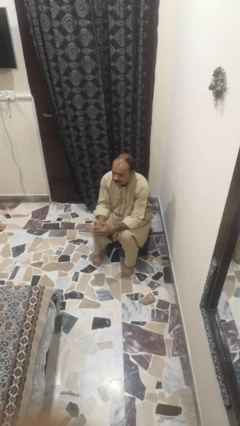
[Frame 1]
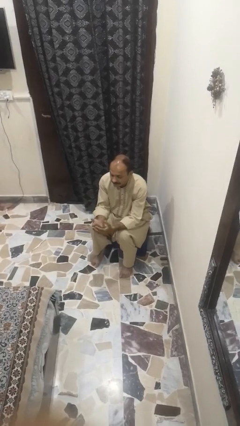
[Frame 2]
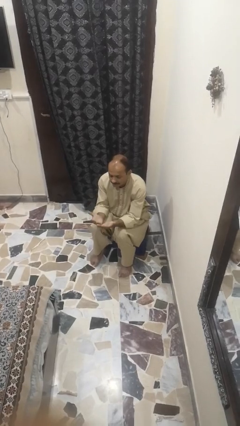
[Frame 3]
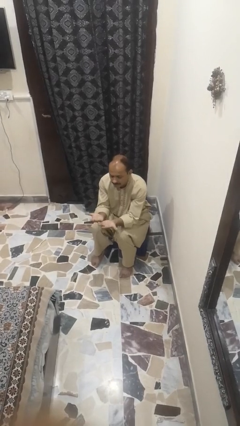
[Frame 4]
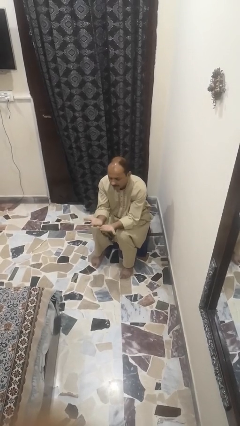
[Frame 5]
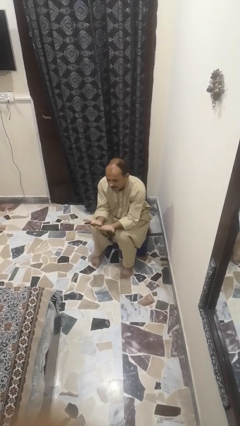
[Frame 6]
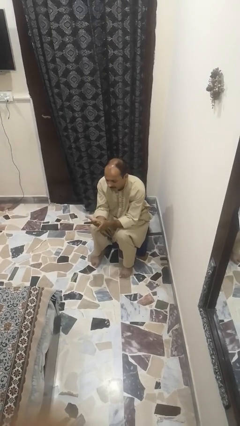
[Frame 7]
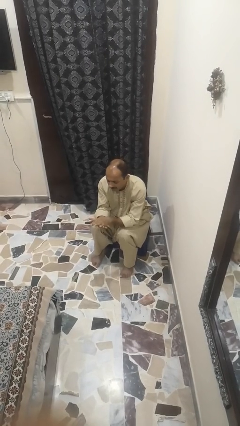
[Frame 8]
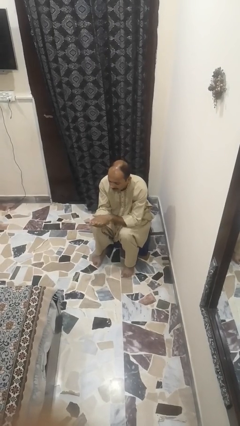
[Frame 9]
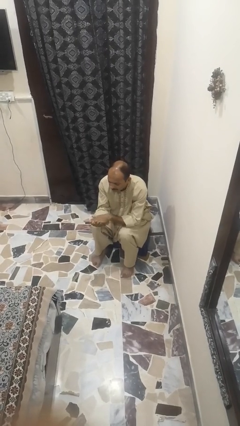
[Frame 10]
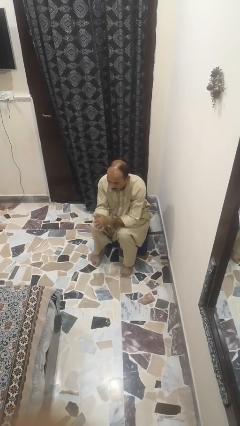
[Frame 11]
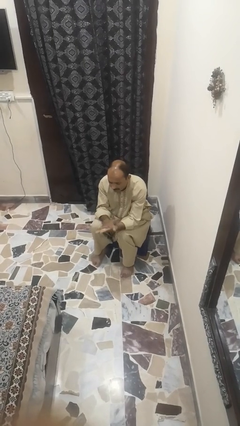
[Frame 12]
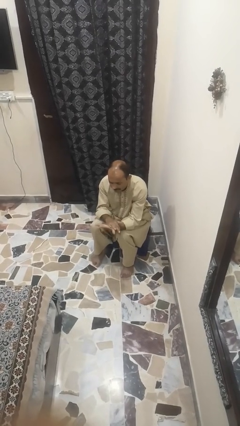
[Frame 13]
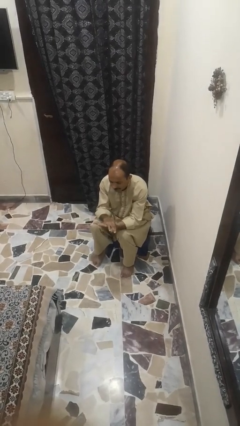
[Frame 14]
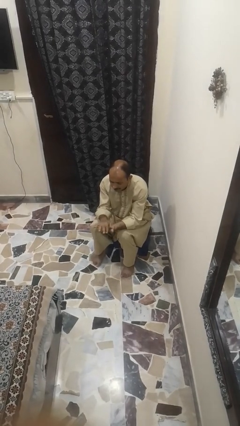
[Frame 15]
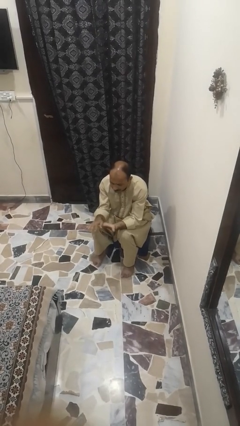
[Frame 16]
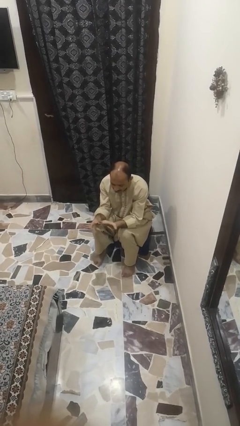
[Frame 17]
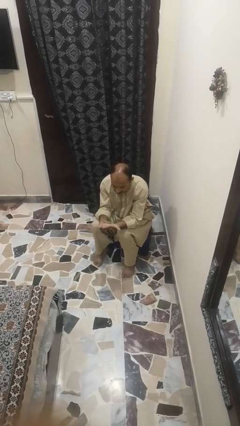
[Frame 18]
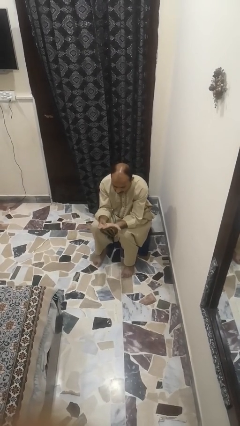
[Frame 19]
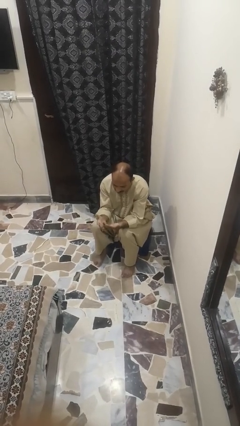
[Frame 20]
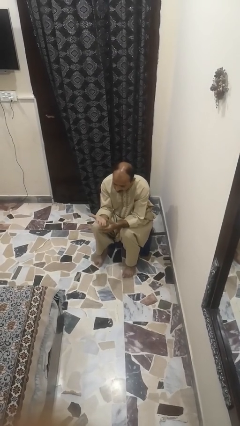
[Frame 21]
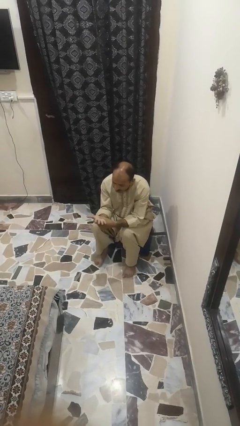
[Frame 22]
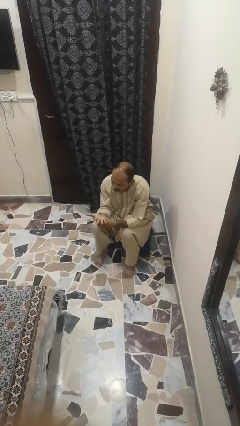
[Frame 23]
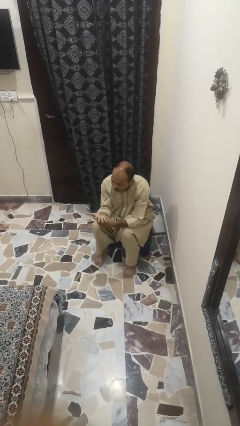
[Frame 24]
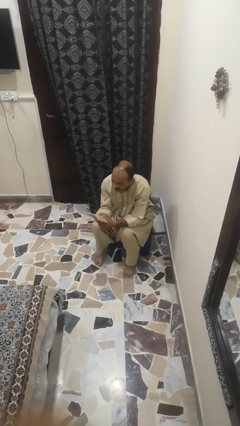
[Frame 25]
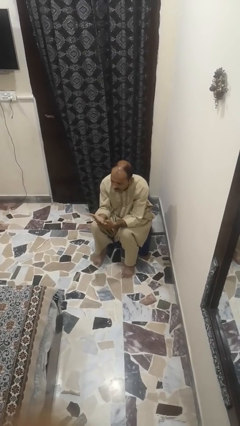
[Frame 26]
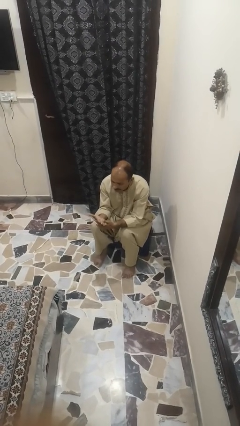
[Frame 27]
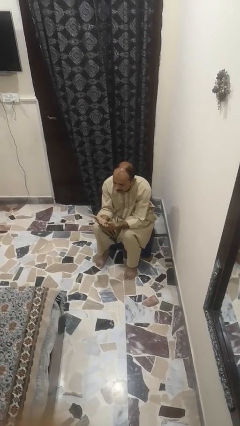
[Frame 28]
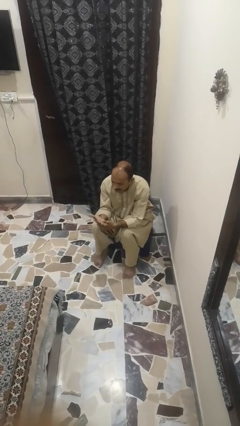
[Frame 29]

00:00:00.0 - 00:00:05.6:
person looks at hands in lap

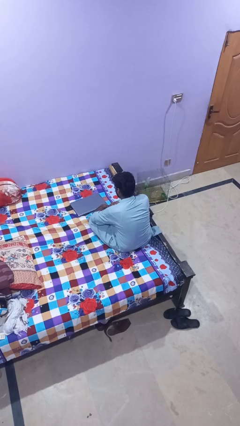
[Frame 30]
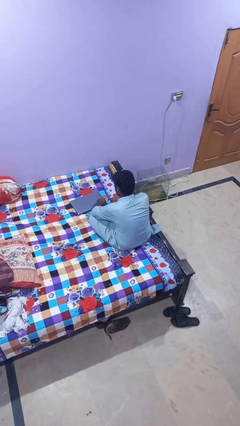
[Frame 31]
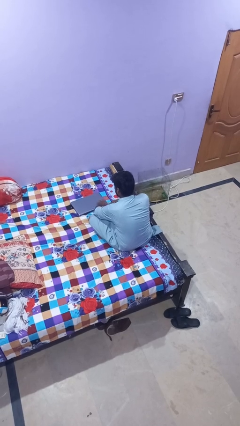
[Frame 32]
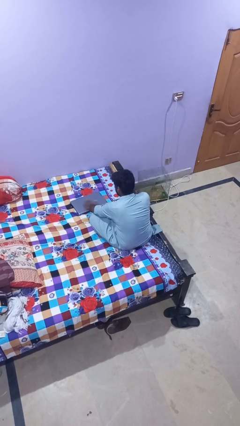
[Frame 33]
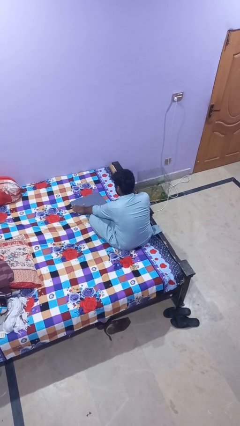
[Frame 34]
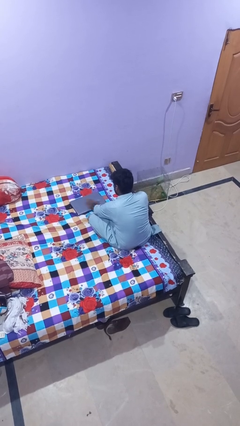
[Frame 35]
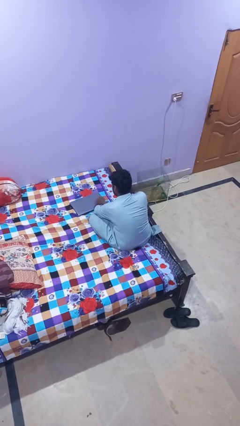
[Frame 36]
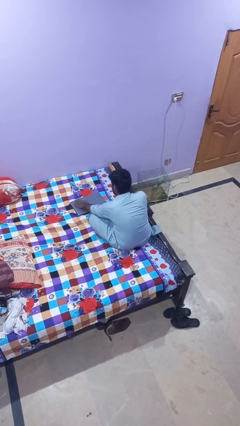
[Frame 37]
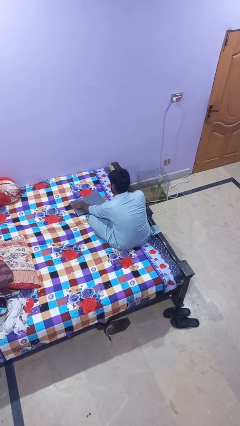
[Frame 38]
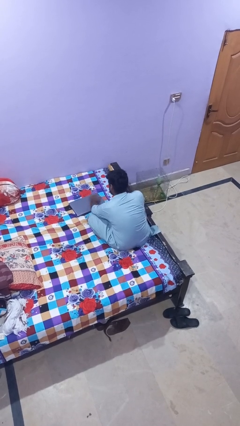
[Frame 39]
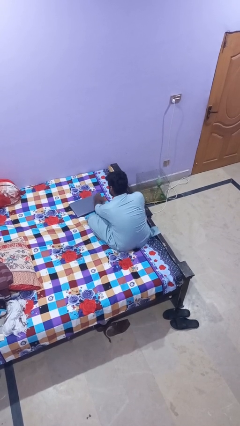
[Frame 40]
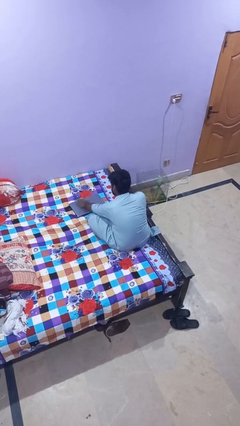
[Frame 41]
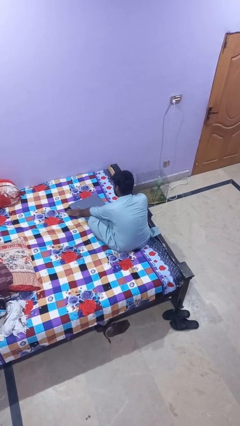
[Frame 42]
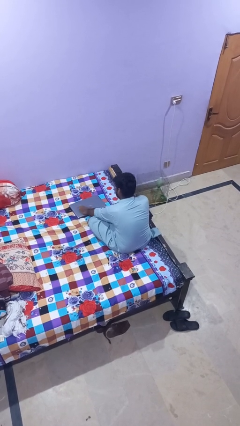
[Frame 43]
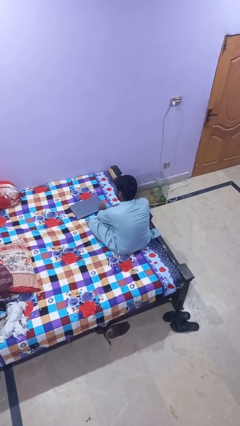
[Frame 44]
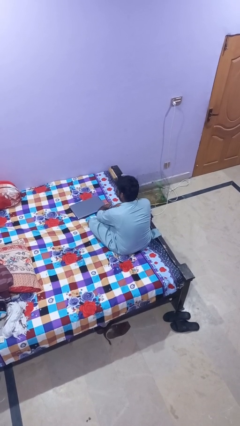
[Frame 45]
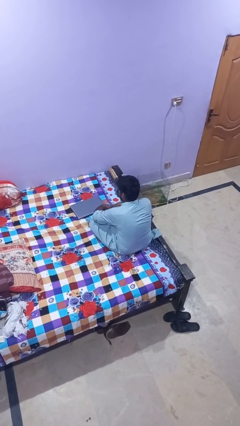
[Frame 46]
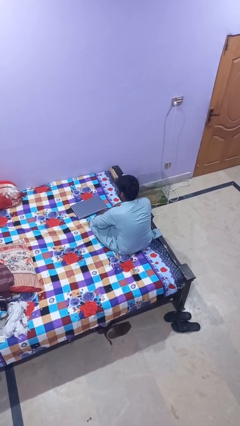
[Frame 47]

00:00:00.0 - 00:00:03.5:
person waves hand over object

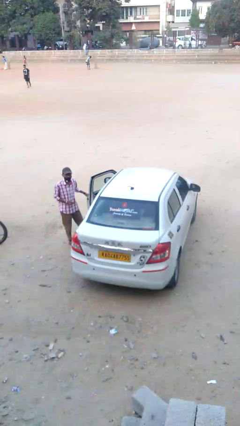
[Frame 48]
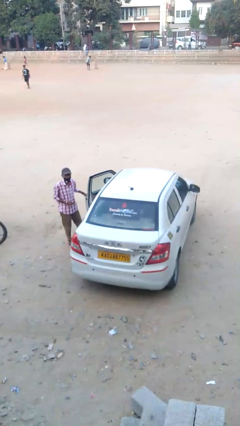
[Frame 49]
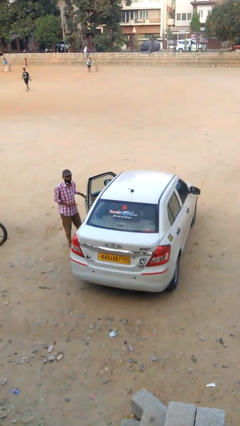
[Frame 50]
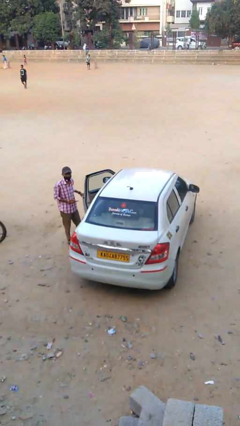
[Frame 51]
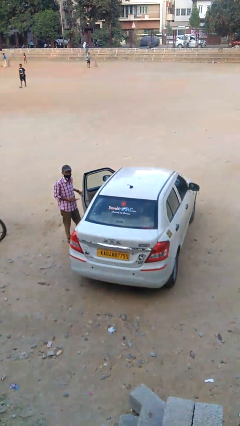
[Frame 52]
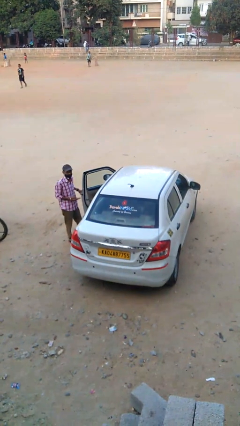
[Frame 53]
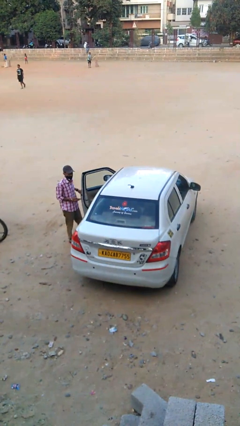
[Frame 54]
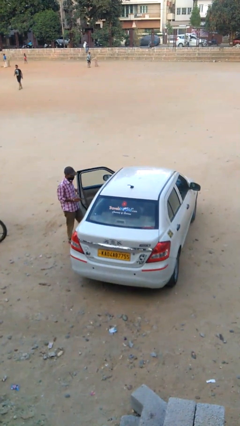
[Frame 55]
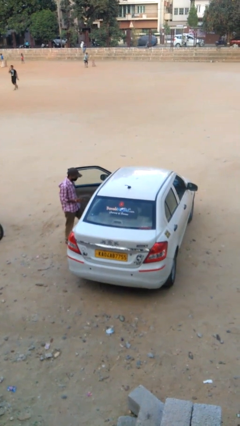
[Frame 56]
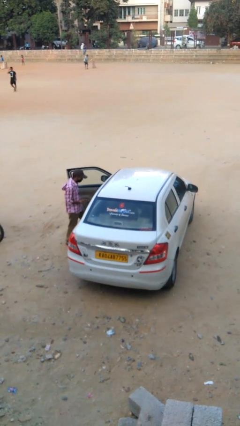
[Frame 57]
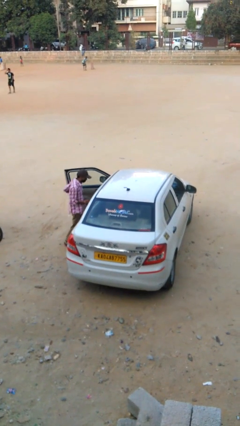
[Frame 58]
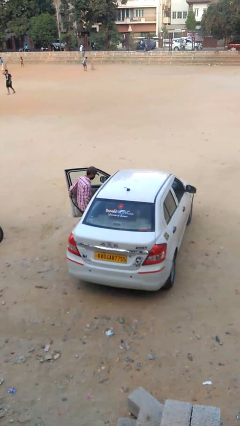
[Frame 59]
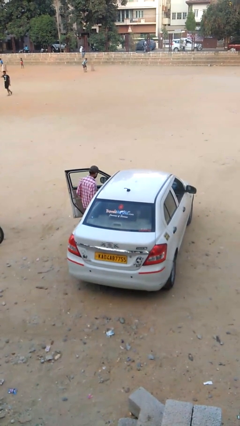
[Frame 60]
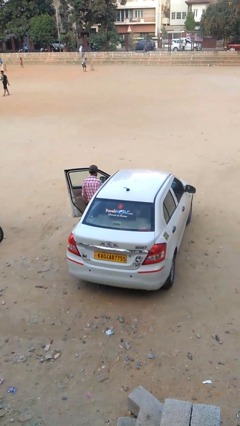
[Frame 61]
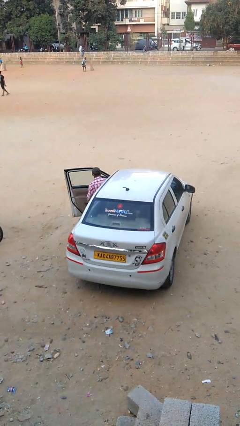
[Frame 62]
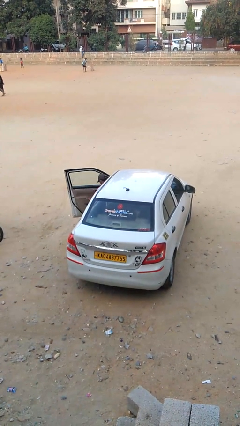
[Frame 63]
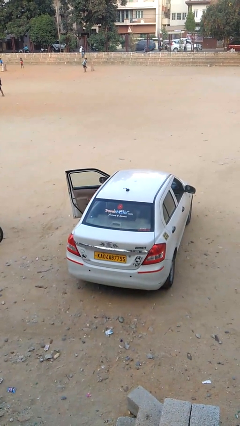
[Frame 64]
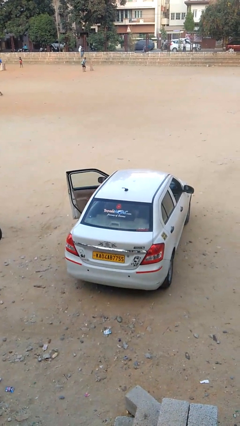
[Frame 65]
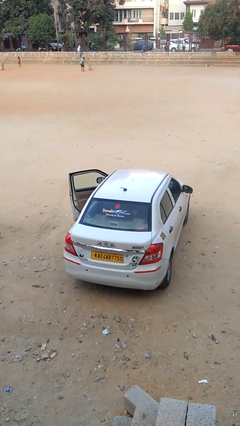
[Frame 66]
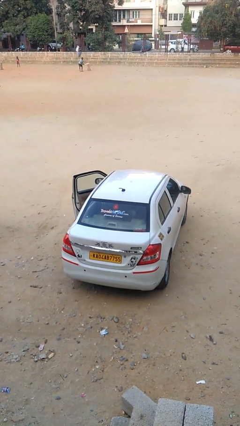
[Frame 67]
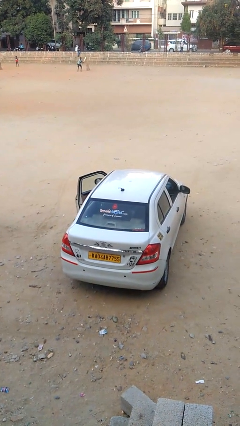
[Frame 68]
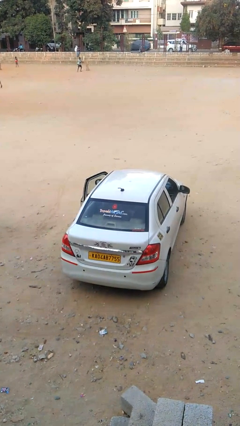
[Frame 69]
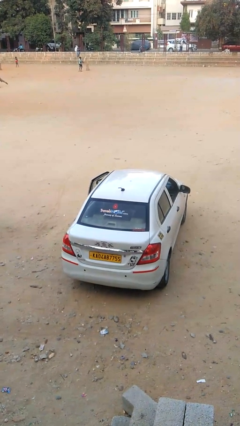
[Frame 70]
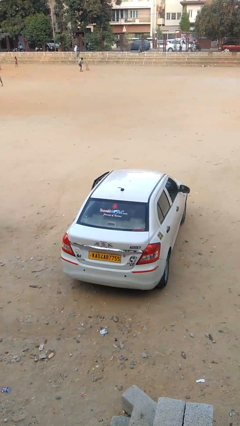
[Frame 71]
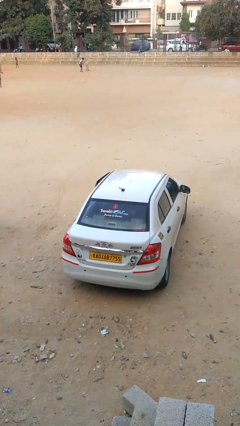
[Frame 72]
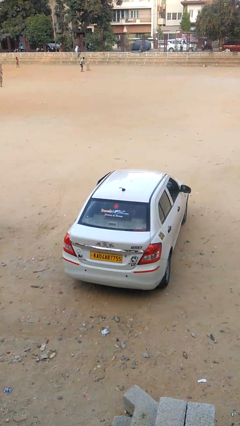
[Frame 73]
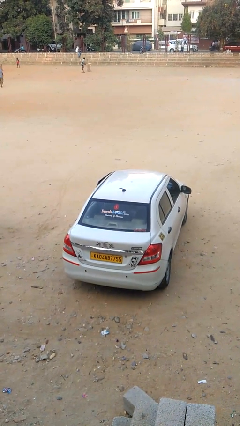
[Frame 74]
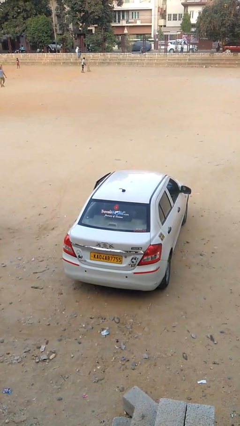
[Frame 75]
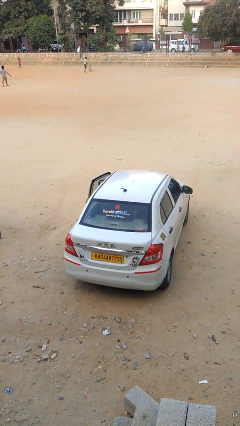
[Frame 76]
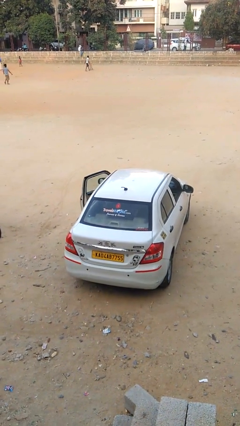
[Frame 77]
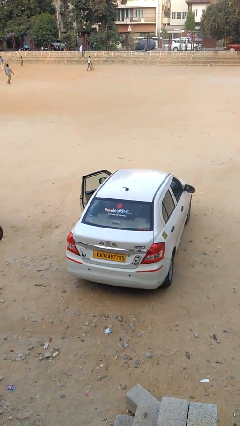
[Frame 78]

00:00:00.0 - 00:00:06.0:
car picks up person

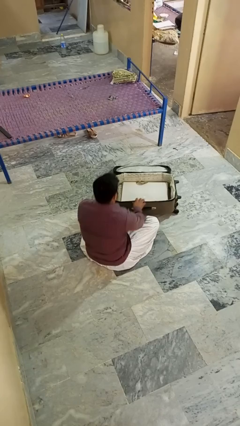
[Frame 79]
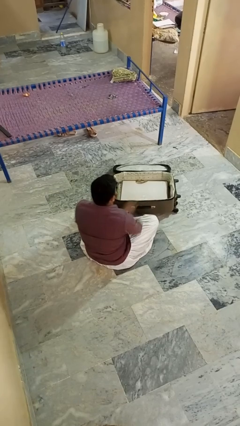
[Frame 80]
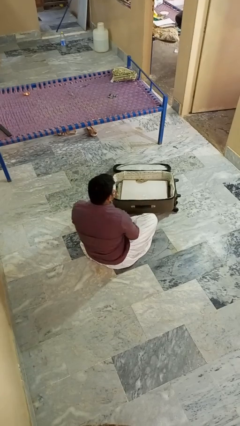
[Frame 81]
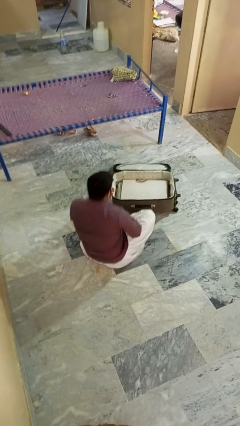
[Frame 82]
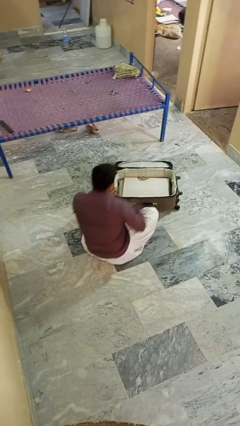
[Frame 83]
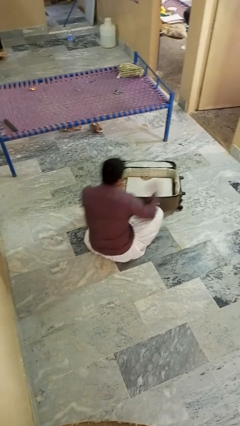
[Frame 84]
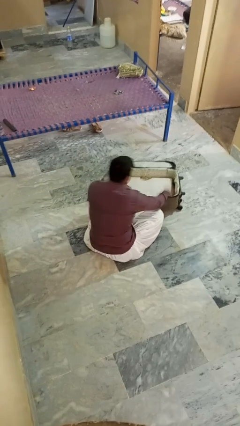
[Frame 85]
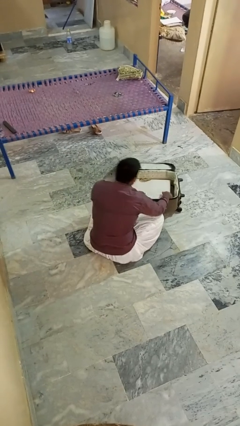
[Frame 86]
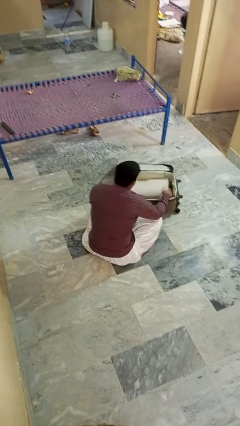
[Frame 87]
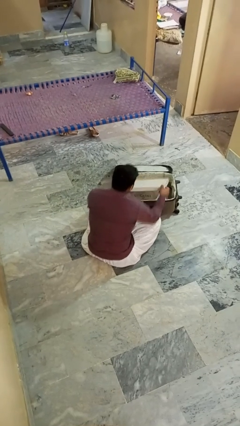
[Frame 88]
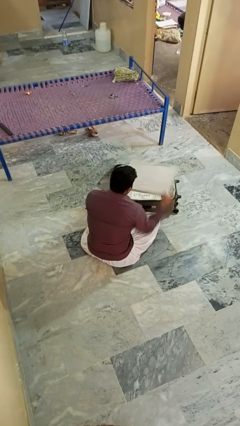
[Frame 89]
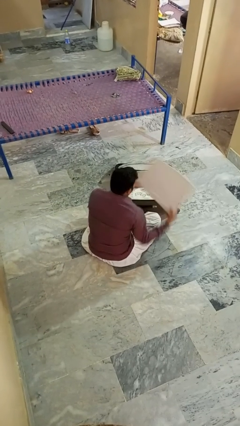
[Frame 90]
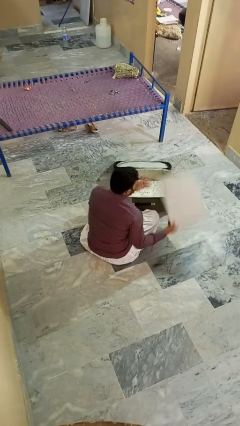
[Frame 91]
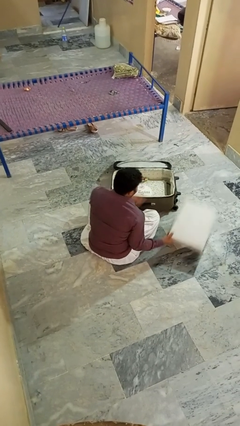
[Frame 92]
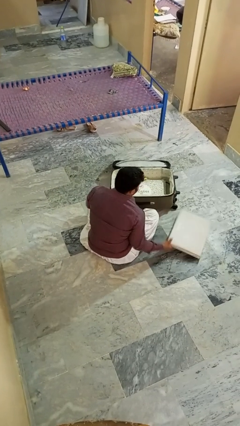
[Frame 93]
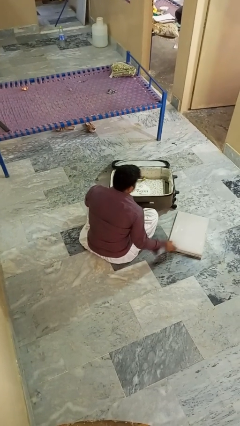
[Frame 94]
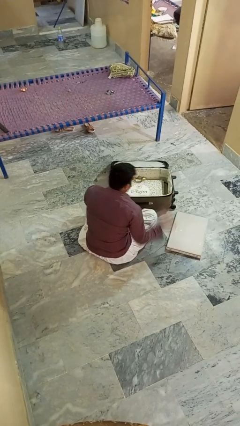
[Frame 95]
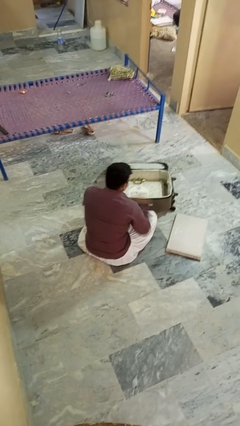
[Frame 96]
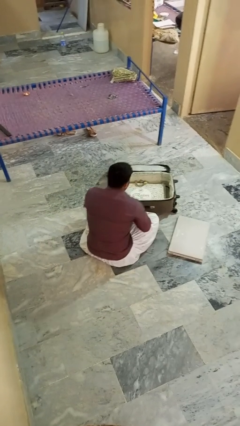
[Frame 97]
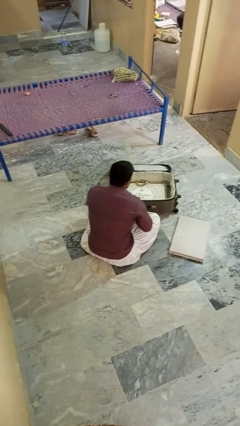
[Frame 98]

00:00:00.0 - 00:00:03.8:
person takes object from bag
